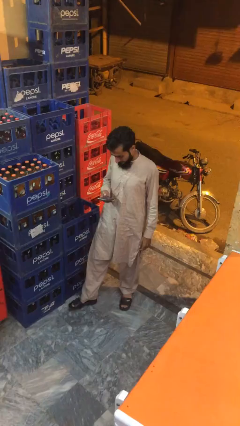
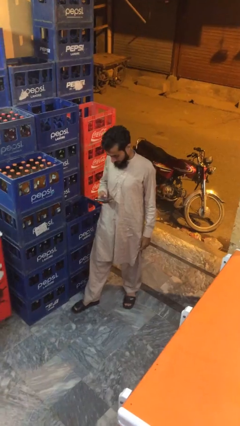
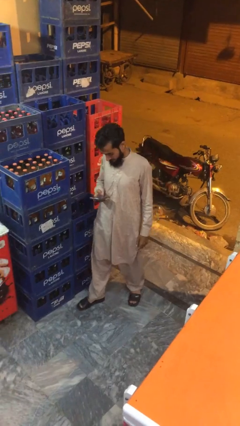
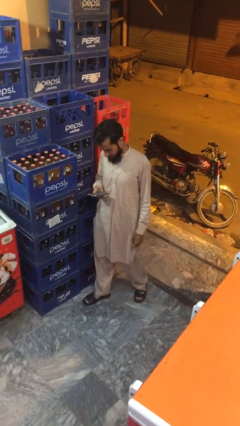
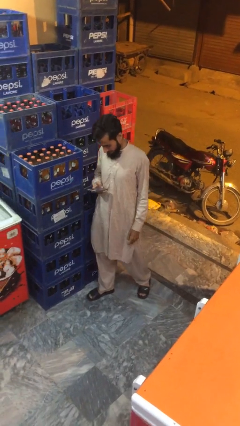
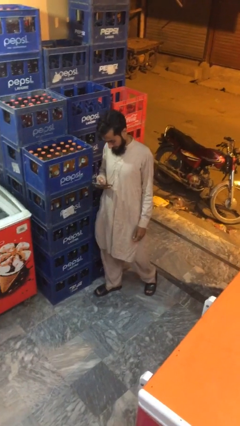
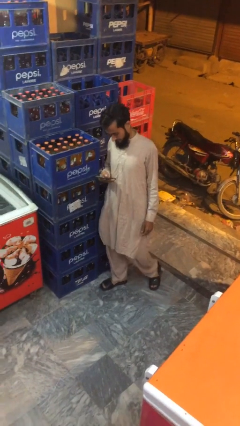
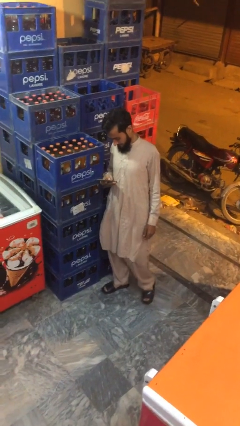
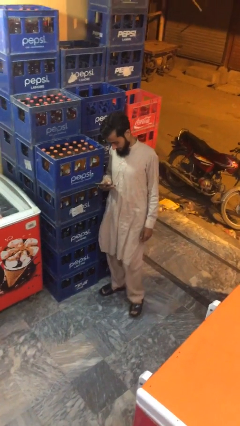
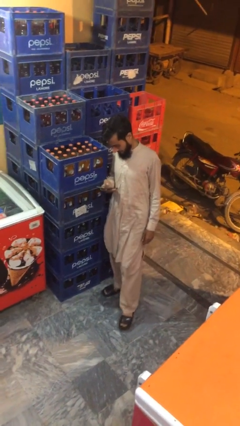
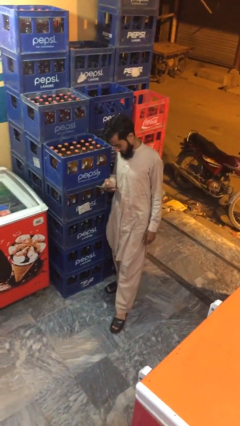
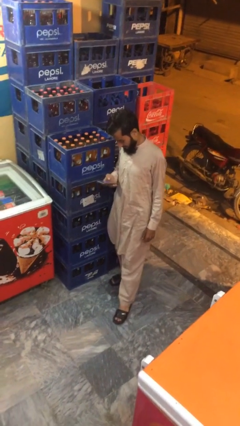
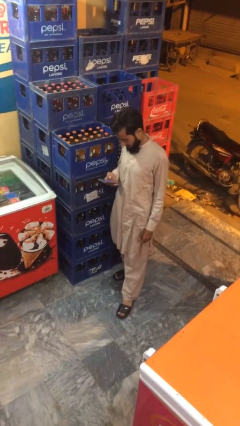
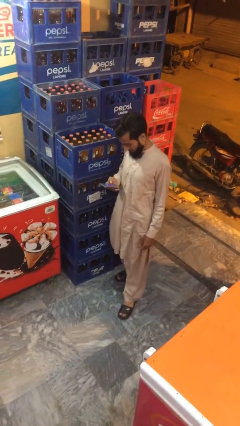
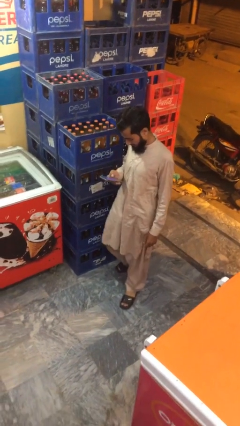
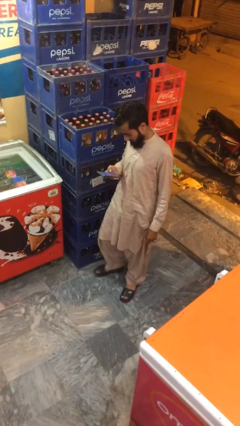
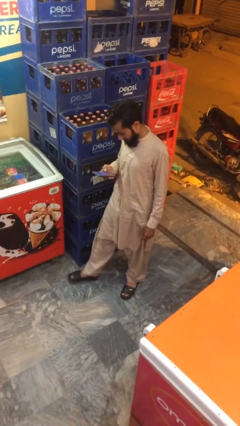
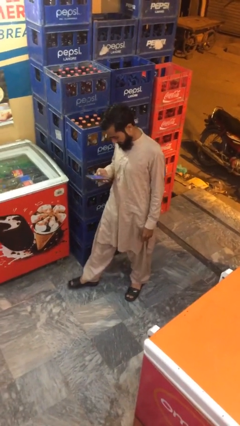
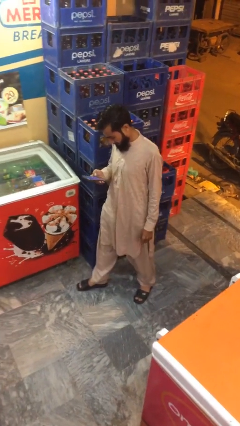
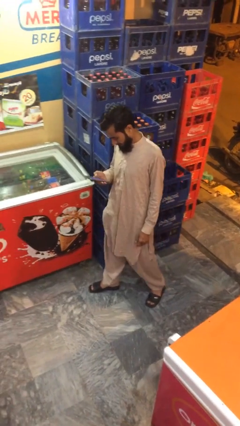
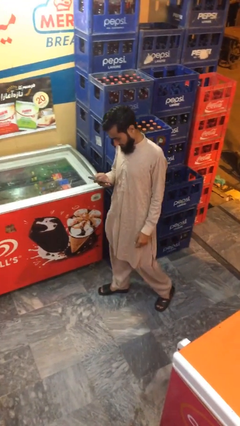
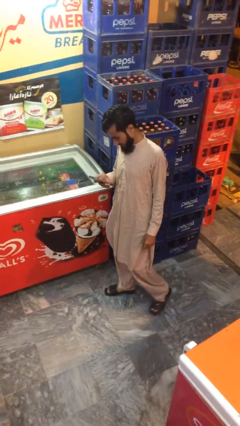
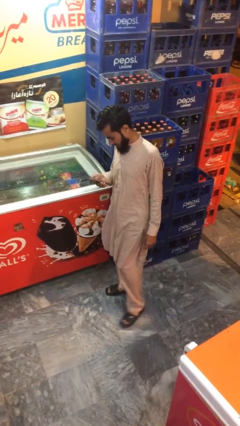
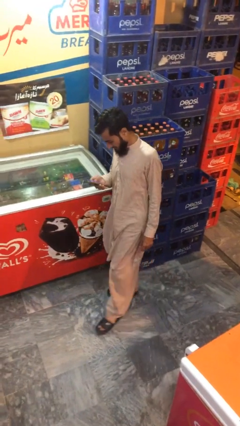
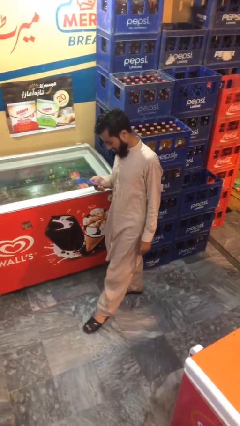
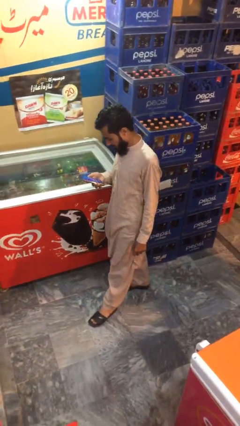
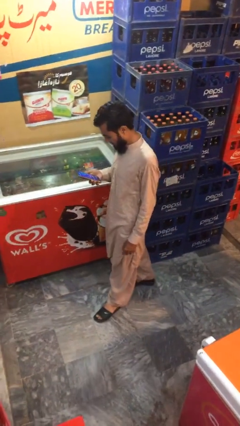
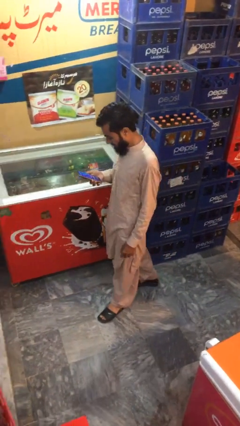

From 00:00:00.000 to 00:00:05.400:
person texts on phone

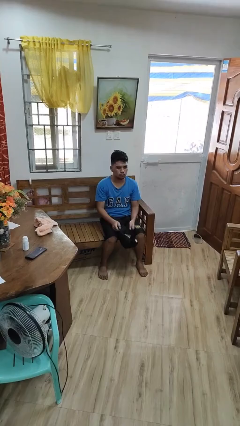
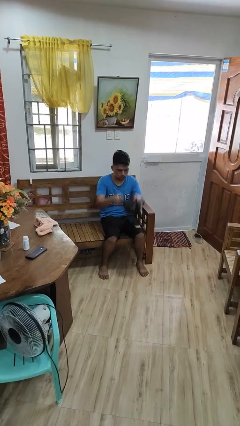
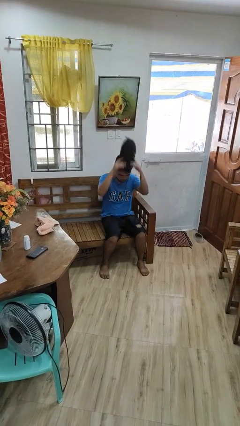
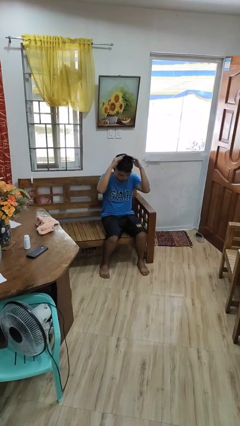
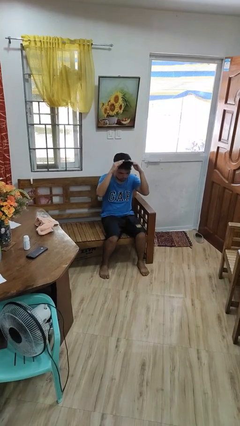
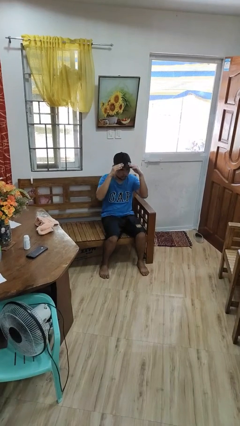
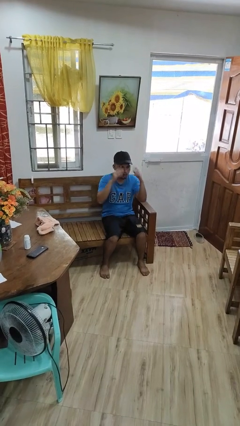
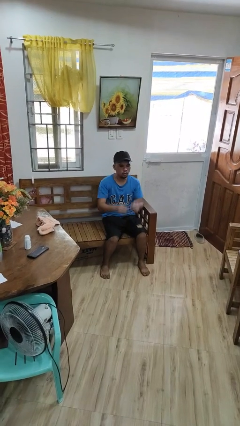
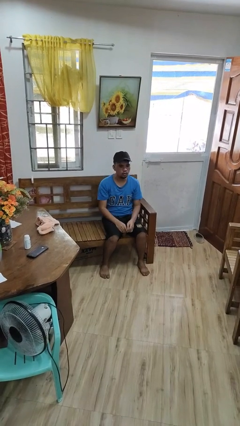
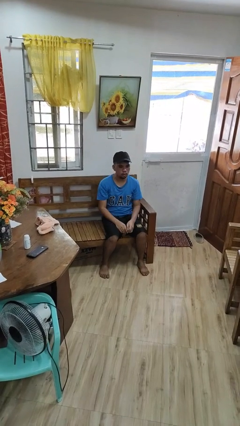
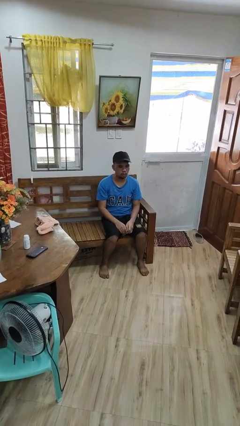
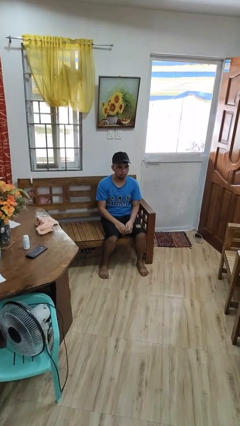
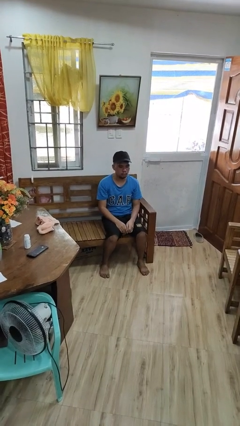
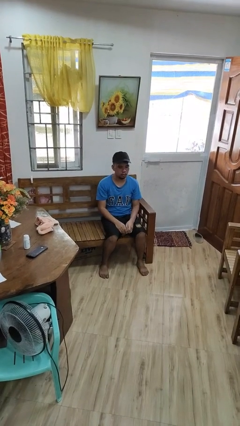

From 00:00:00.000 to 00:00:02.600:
person puts on hat

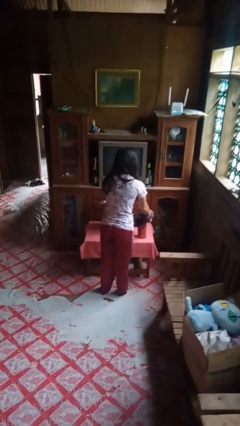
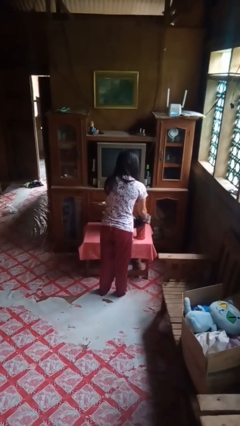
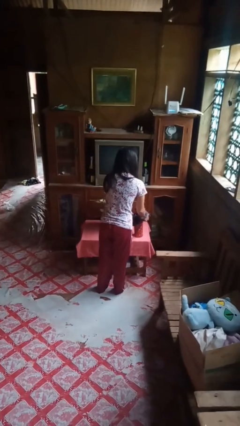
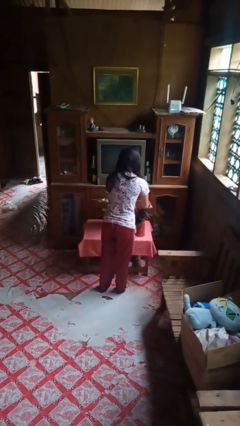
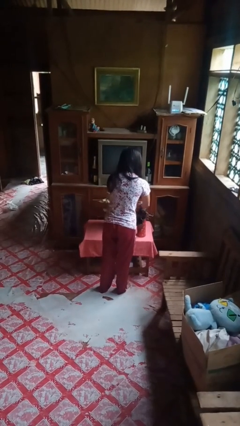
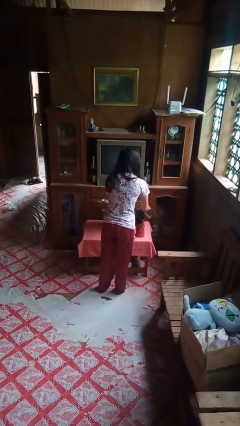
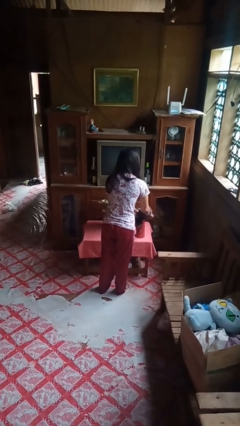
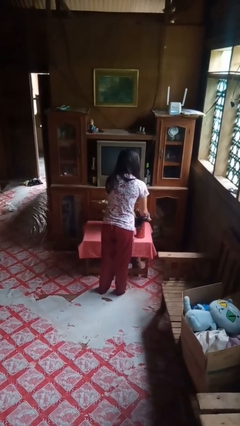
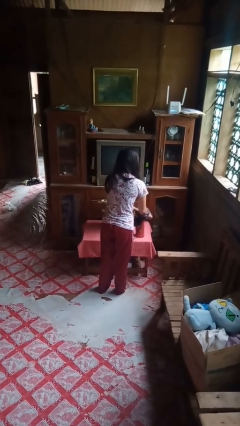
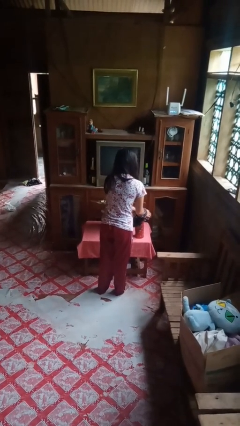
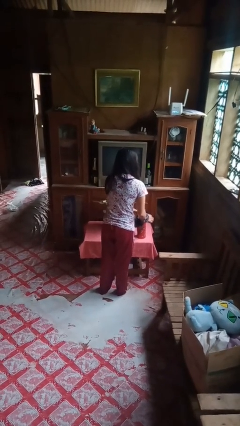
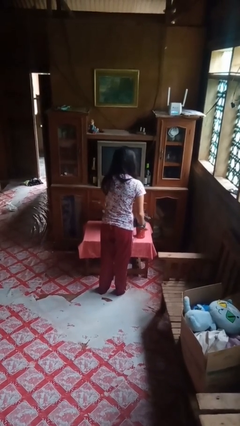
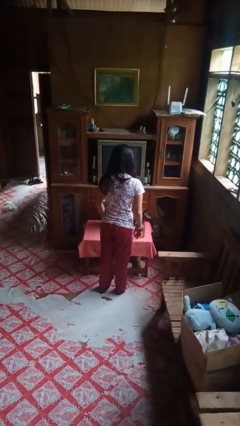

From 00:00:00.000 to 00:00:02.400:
person arranges flowers in vase

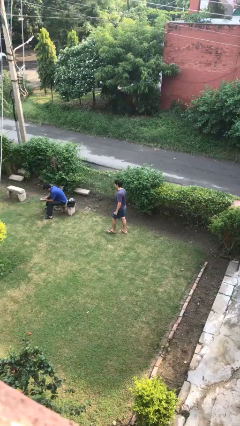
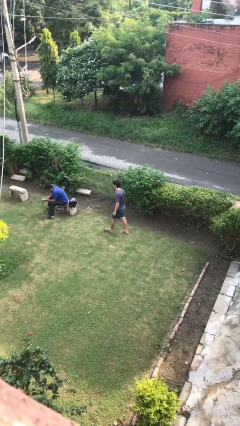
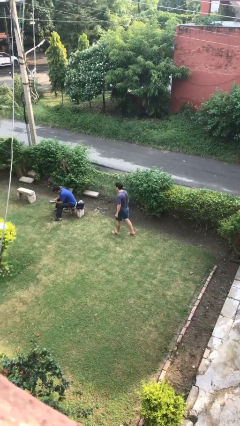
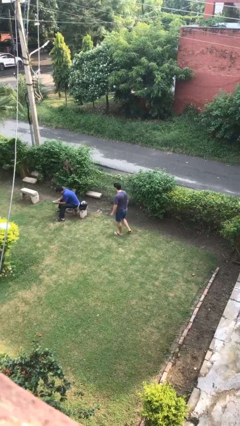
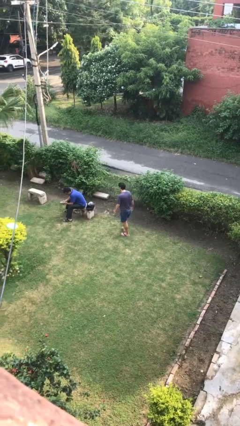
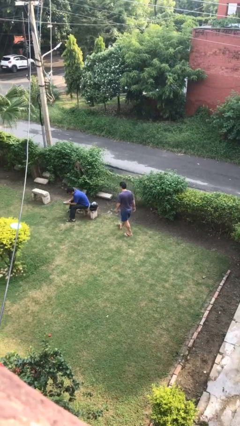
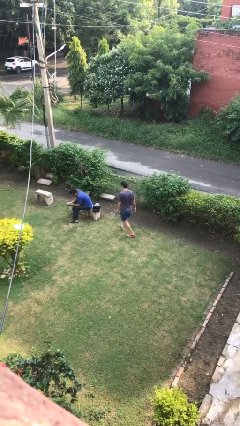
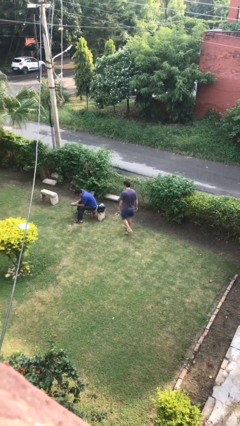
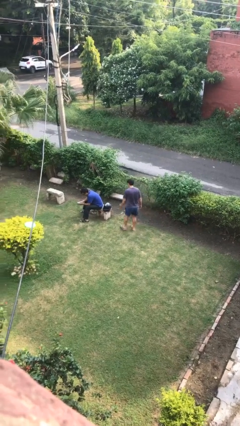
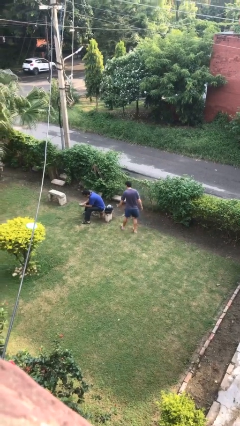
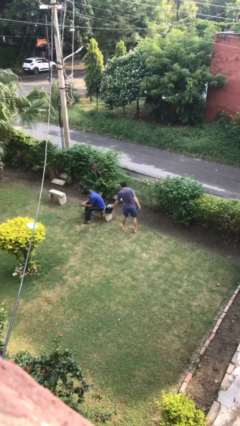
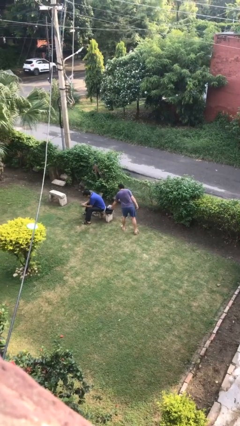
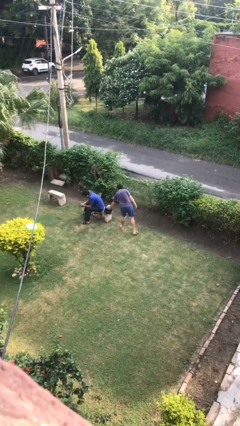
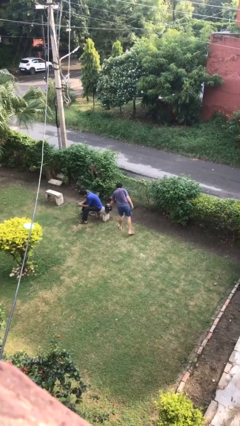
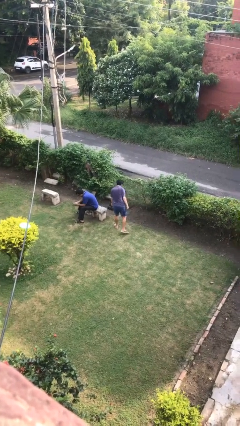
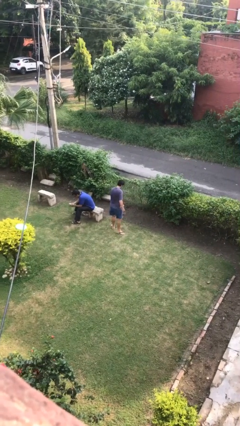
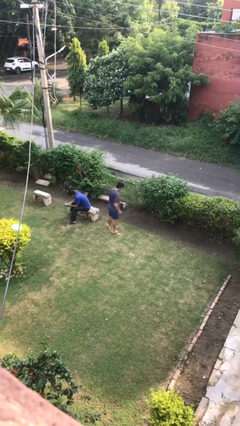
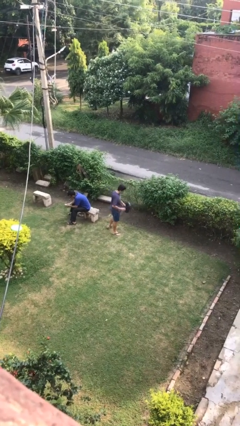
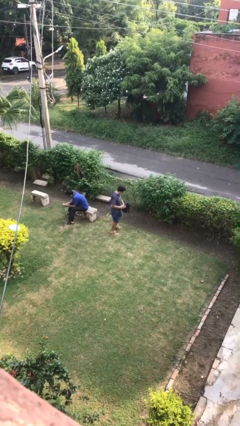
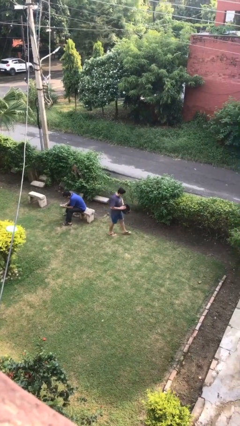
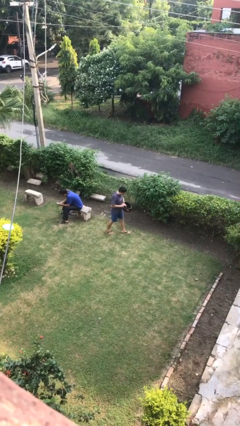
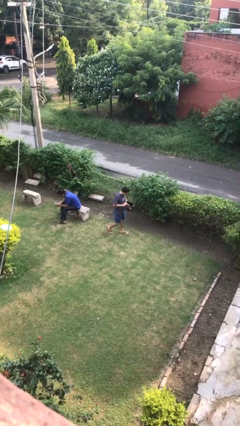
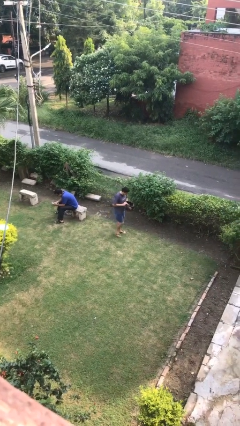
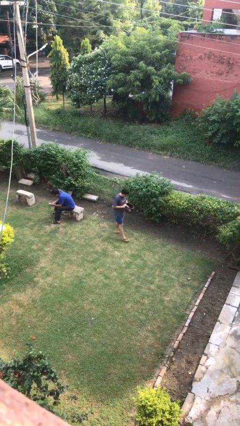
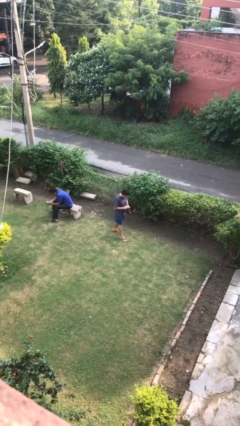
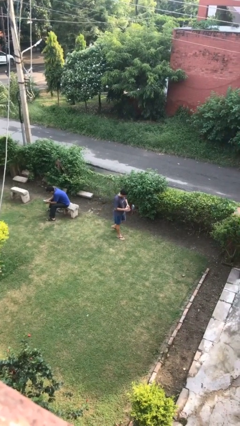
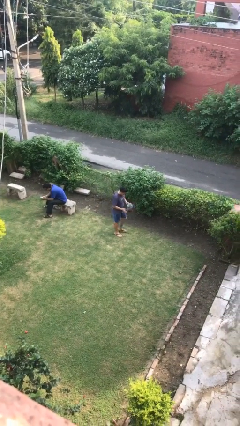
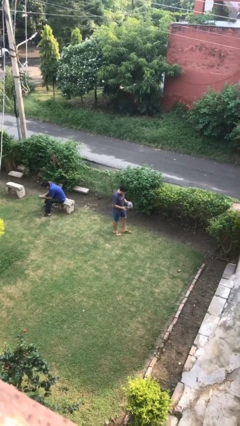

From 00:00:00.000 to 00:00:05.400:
person steals object from person

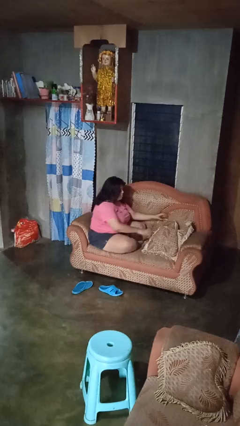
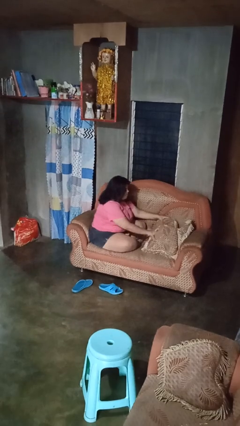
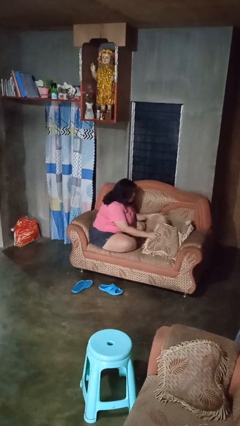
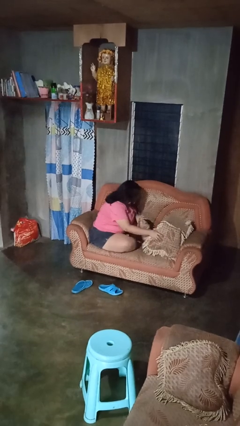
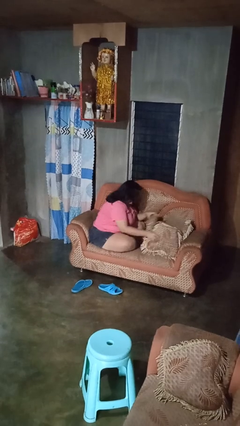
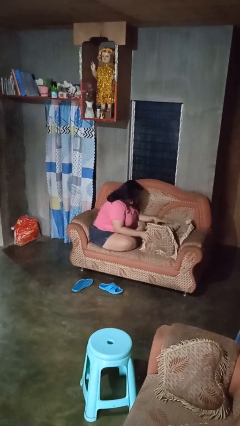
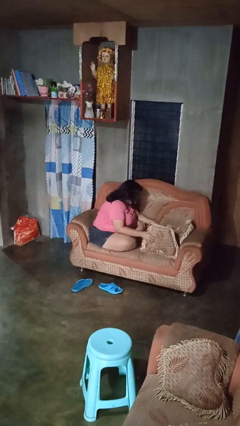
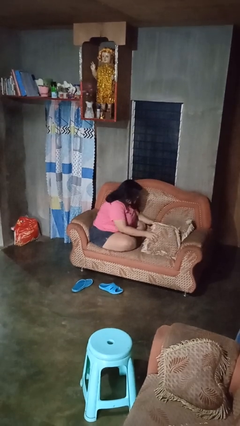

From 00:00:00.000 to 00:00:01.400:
person searches in couch

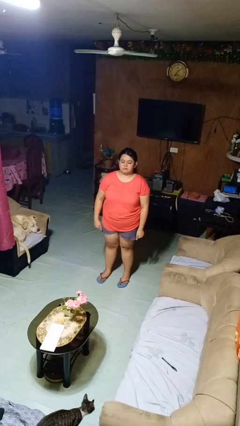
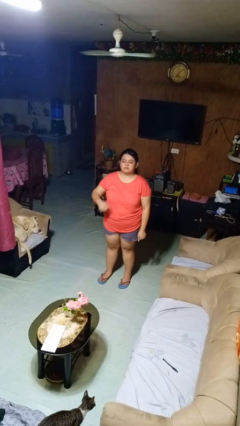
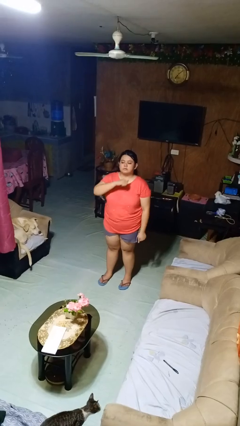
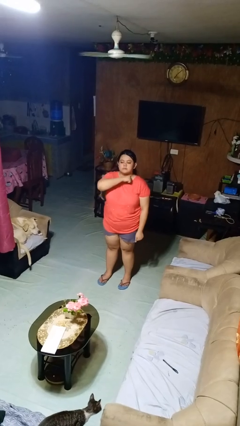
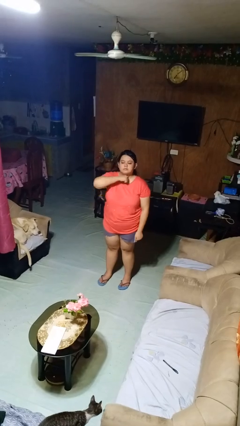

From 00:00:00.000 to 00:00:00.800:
person gestures cut
